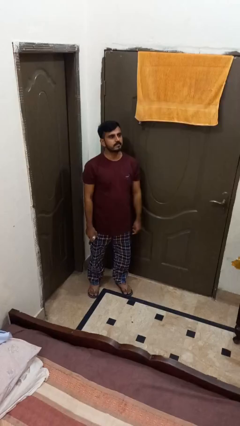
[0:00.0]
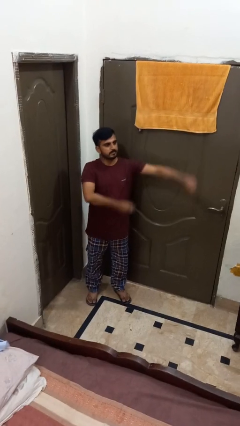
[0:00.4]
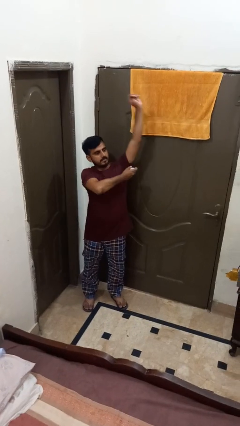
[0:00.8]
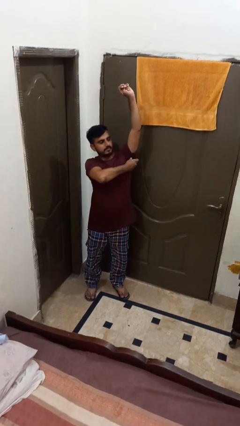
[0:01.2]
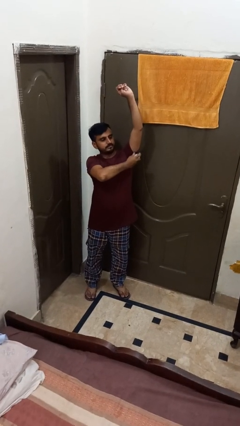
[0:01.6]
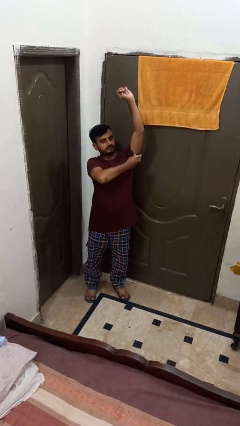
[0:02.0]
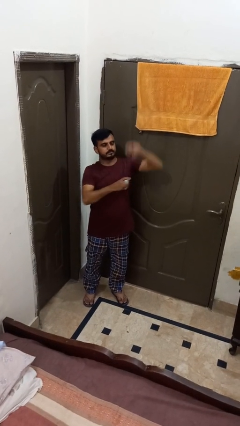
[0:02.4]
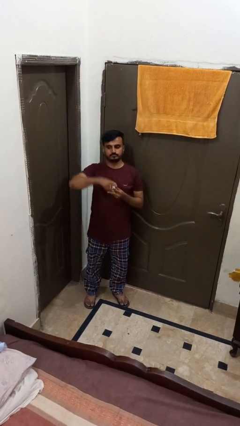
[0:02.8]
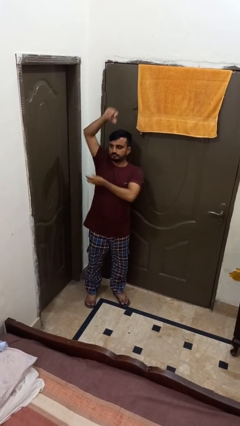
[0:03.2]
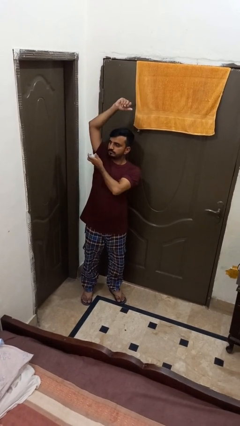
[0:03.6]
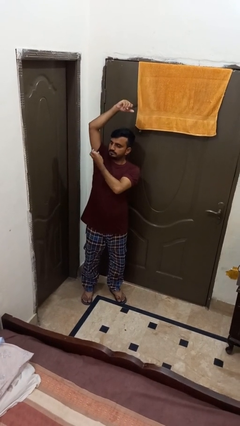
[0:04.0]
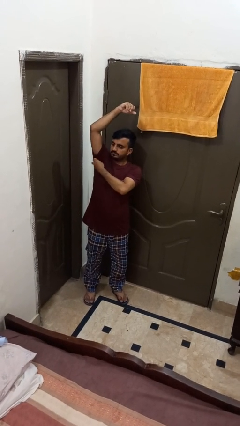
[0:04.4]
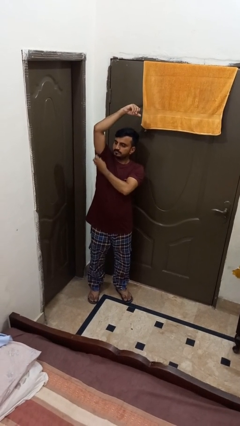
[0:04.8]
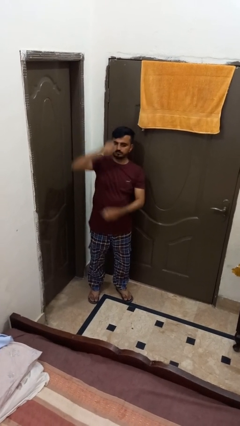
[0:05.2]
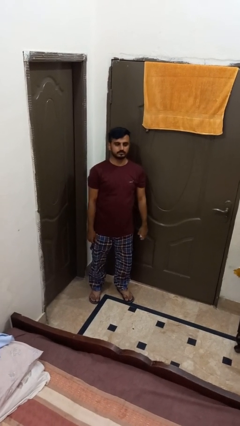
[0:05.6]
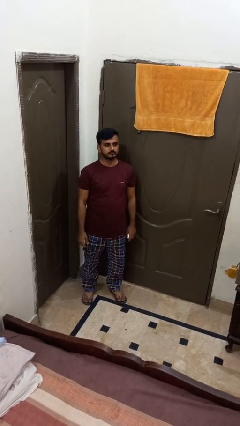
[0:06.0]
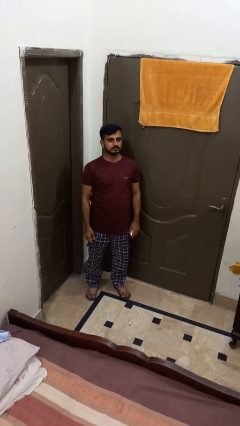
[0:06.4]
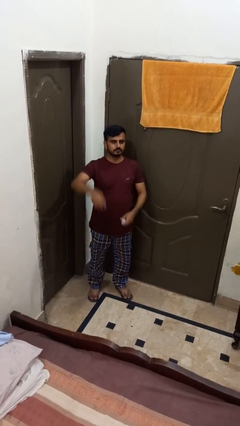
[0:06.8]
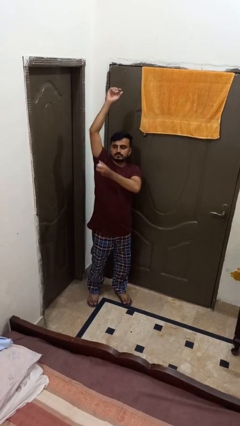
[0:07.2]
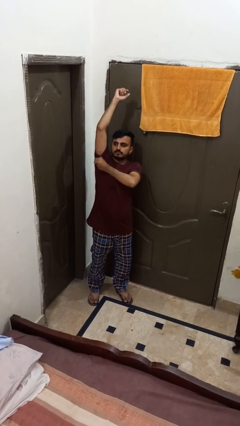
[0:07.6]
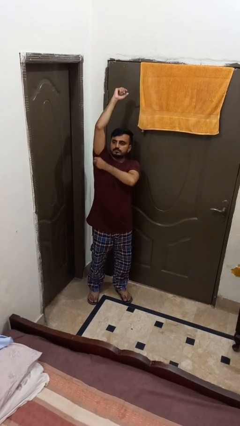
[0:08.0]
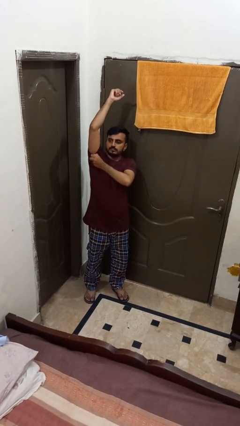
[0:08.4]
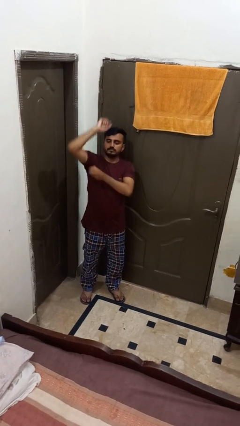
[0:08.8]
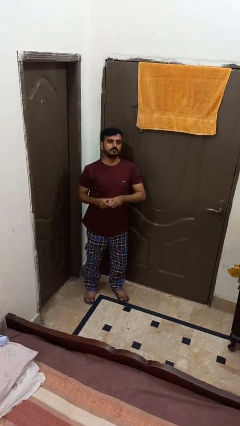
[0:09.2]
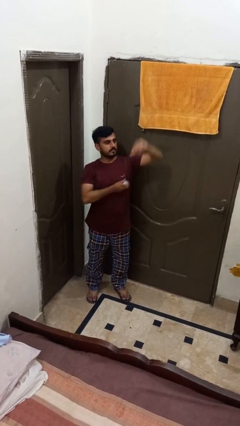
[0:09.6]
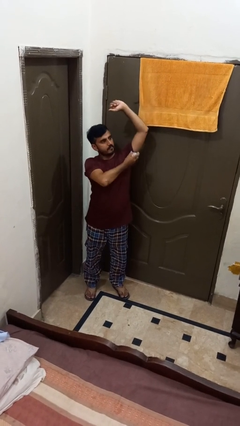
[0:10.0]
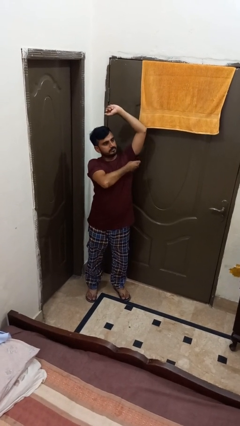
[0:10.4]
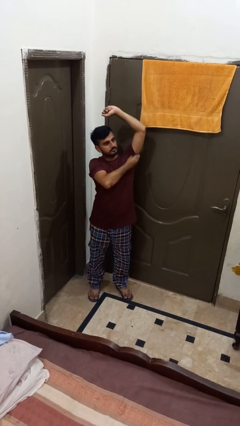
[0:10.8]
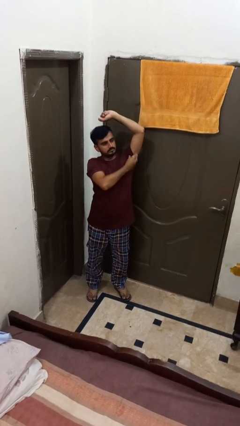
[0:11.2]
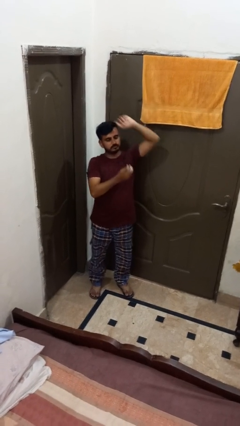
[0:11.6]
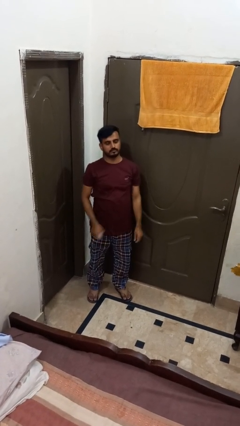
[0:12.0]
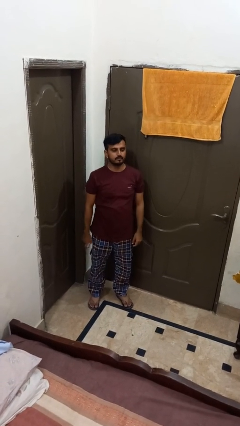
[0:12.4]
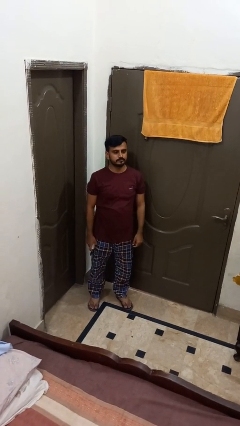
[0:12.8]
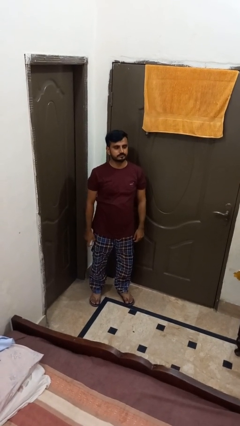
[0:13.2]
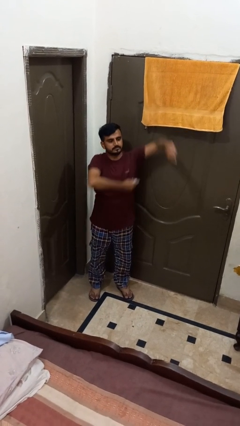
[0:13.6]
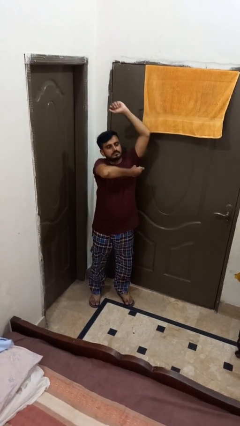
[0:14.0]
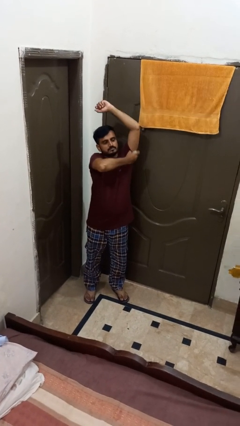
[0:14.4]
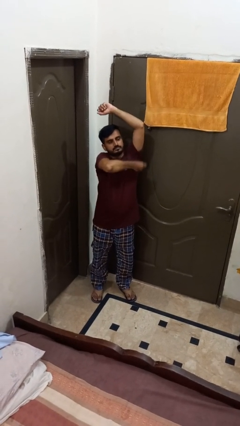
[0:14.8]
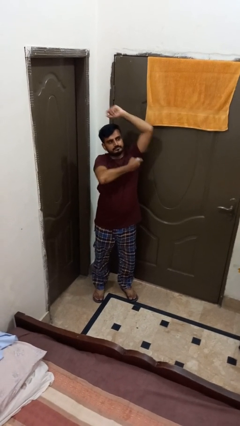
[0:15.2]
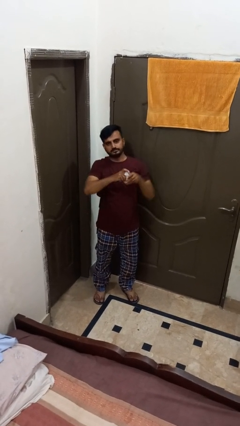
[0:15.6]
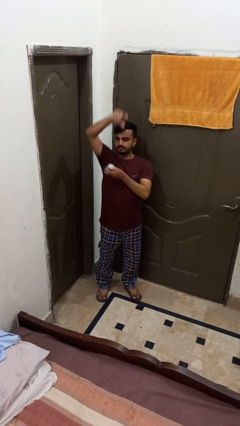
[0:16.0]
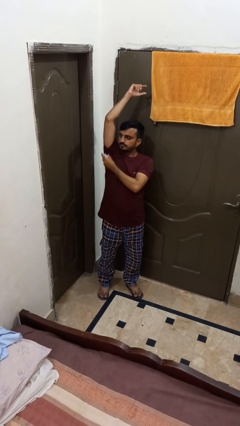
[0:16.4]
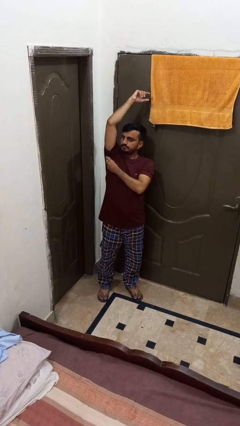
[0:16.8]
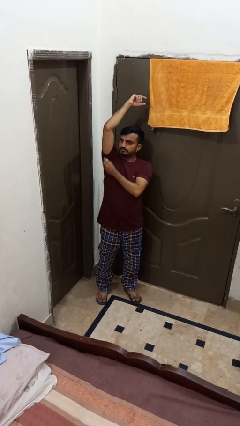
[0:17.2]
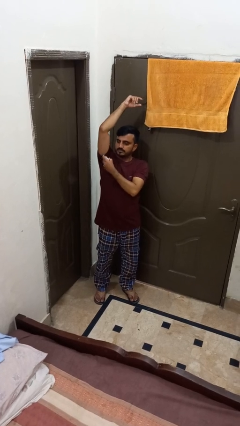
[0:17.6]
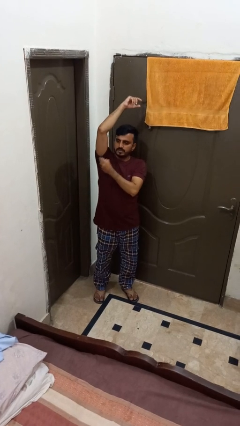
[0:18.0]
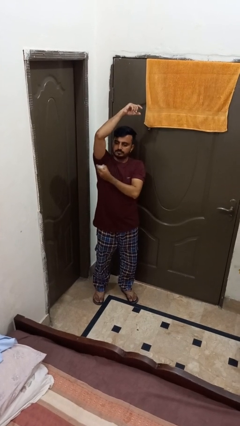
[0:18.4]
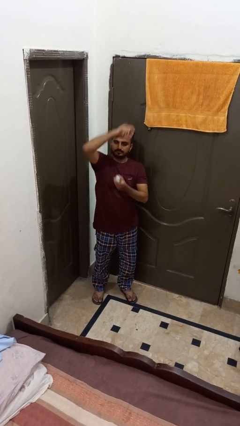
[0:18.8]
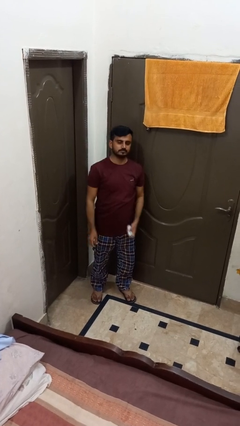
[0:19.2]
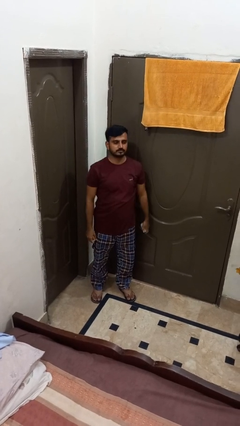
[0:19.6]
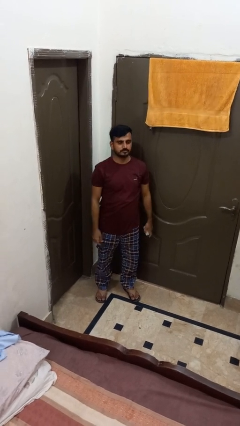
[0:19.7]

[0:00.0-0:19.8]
person applies deodorant

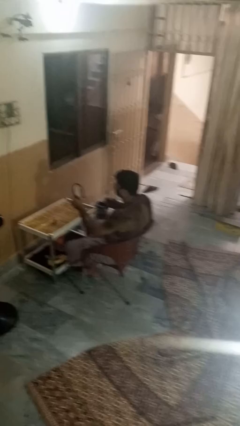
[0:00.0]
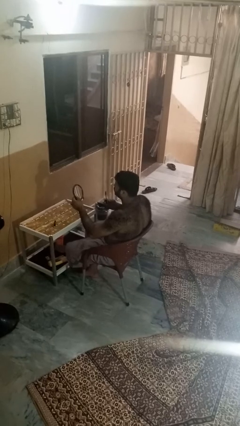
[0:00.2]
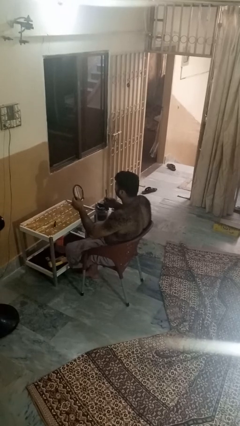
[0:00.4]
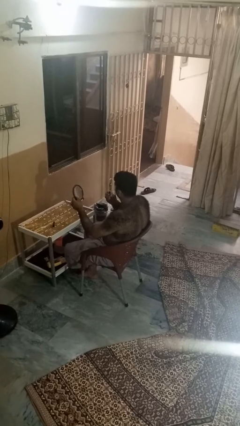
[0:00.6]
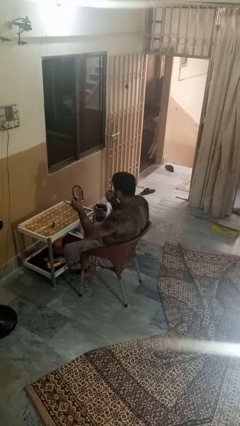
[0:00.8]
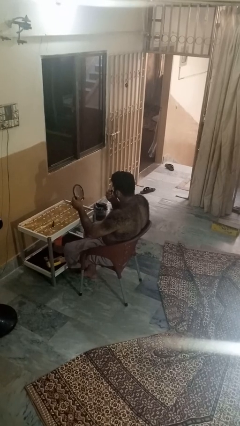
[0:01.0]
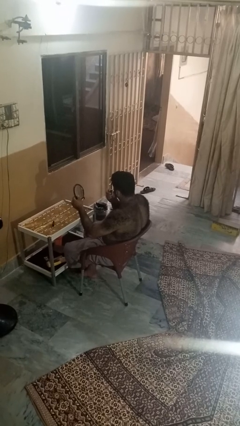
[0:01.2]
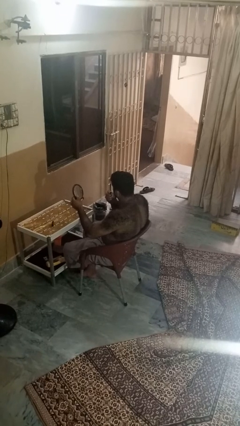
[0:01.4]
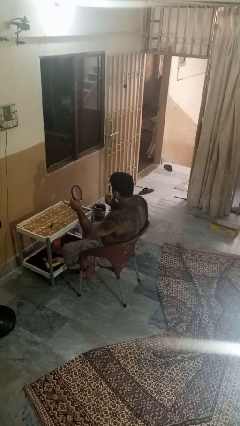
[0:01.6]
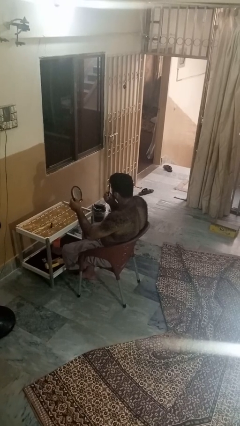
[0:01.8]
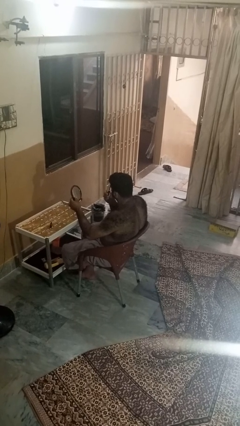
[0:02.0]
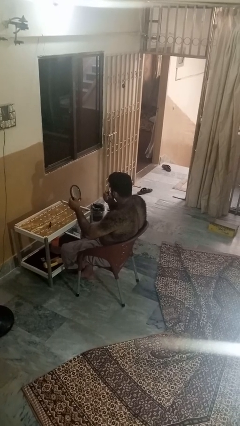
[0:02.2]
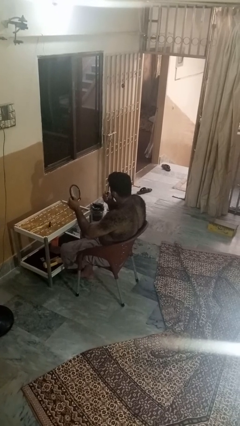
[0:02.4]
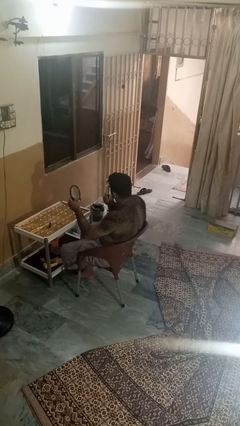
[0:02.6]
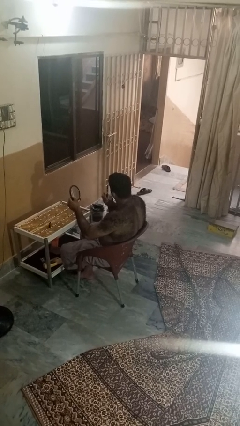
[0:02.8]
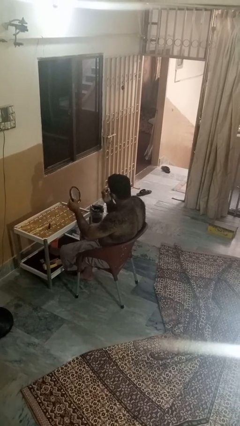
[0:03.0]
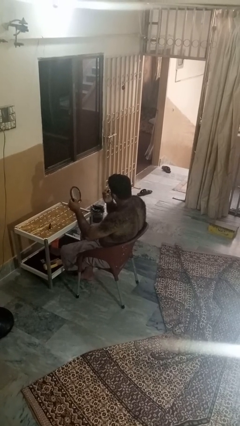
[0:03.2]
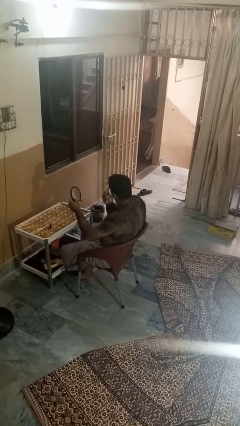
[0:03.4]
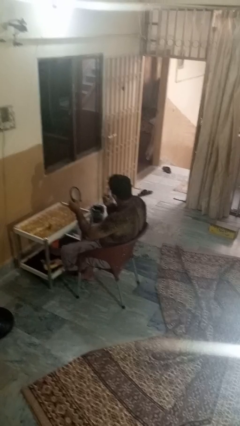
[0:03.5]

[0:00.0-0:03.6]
person applies eye makeup

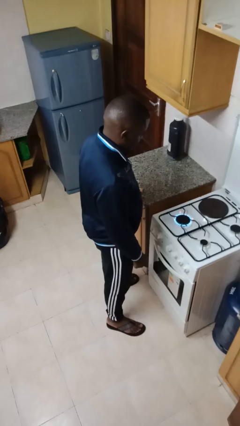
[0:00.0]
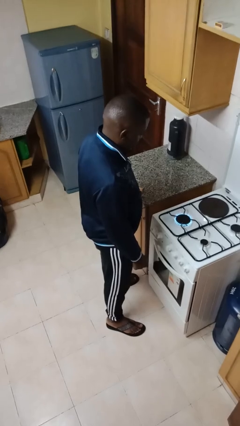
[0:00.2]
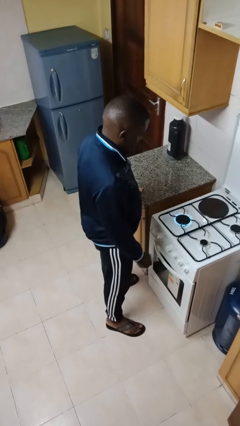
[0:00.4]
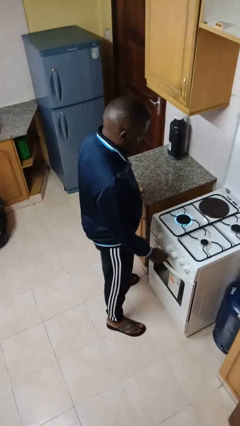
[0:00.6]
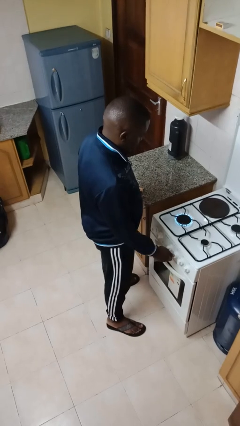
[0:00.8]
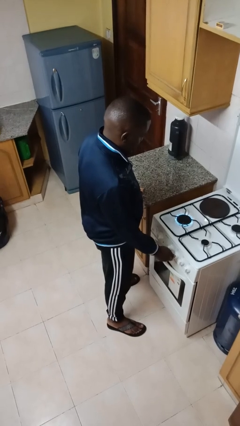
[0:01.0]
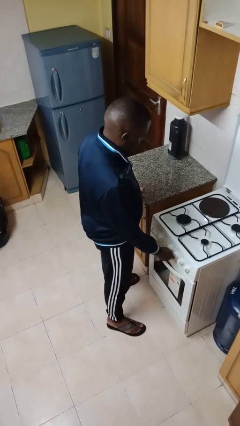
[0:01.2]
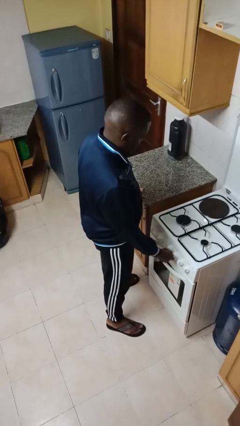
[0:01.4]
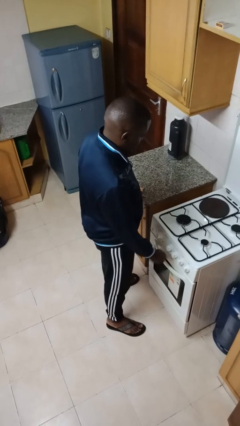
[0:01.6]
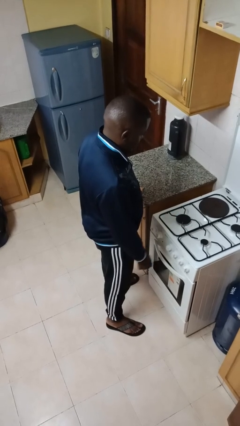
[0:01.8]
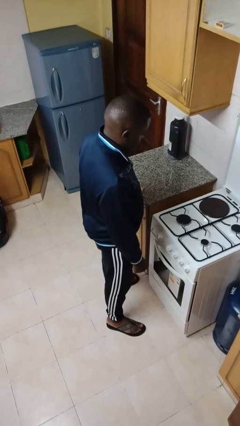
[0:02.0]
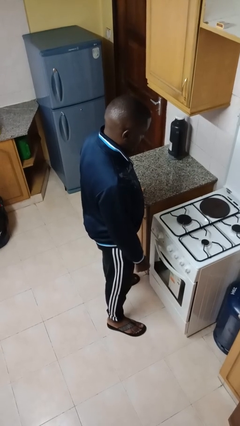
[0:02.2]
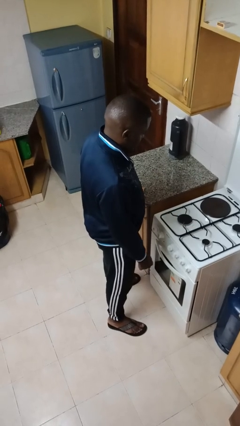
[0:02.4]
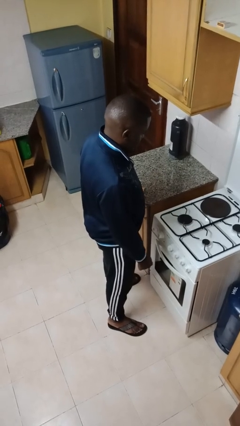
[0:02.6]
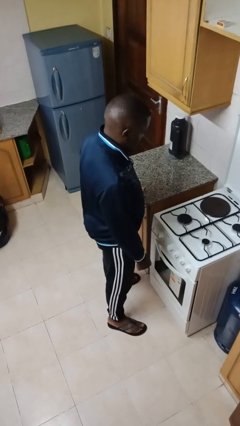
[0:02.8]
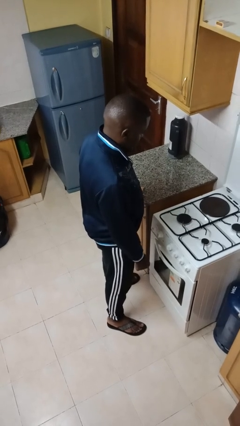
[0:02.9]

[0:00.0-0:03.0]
person turns off stovetop

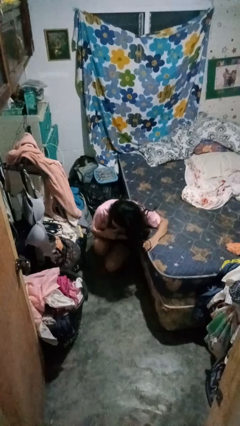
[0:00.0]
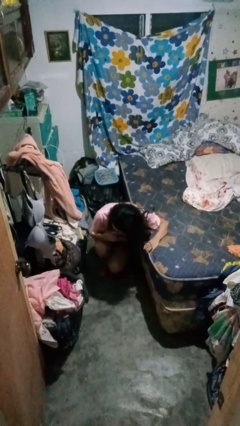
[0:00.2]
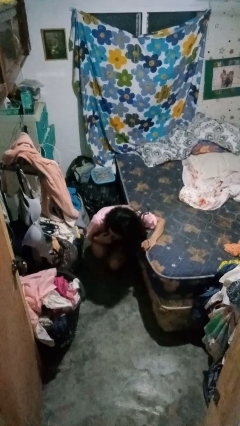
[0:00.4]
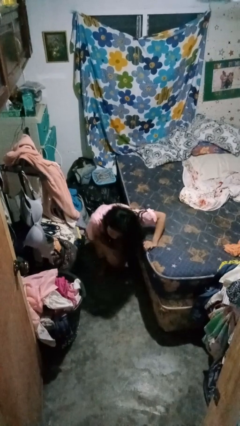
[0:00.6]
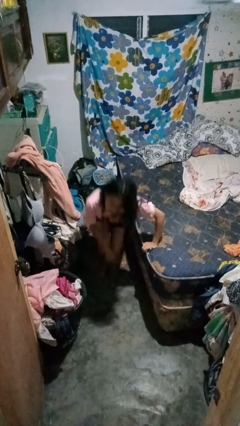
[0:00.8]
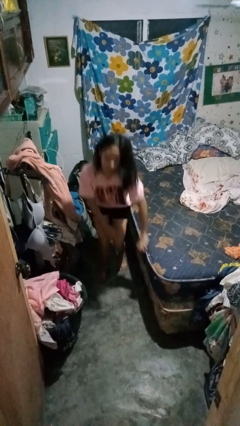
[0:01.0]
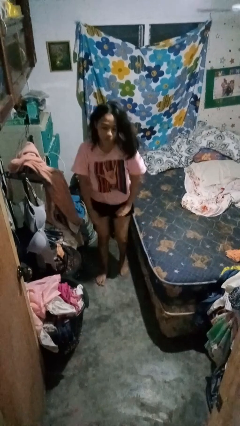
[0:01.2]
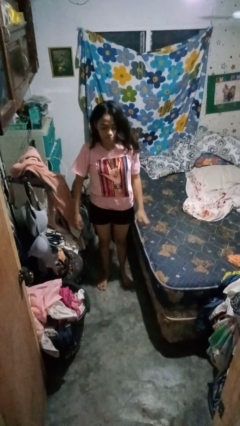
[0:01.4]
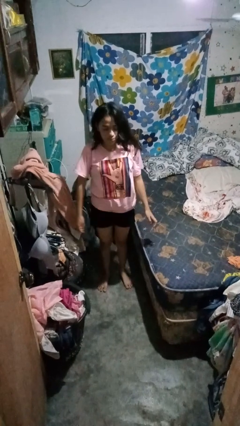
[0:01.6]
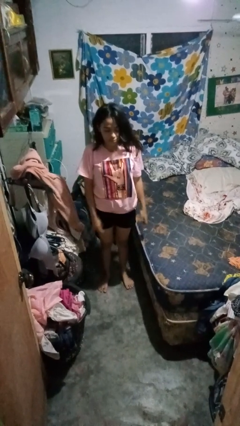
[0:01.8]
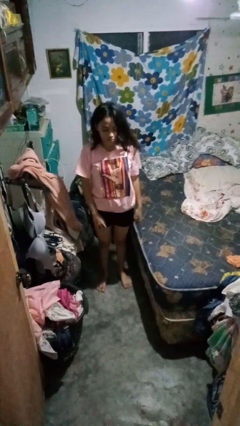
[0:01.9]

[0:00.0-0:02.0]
person stands up from floor
